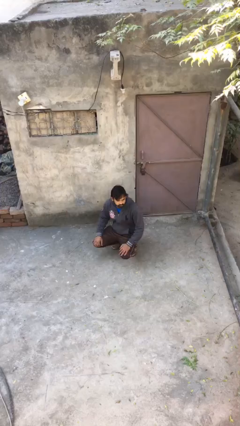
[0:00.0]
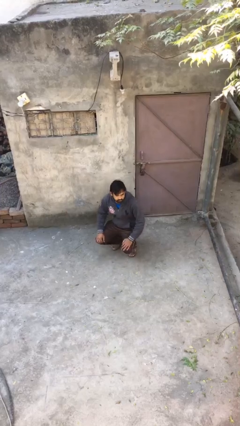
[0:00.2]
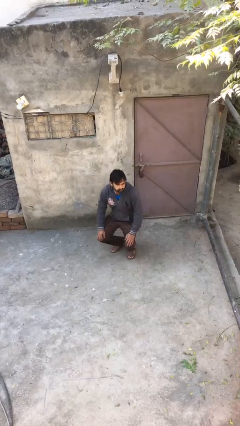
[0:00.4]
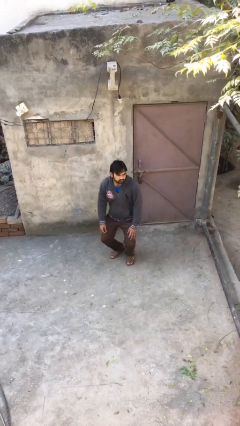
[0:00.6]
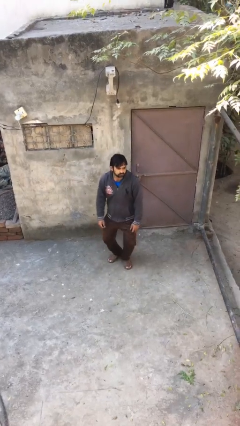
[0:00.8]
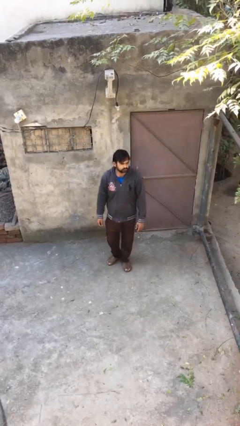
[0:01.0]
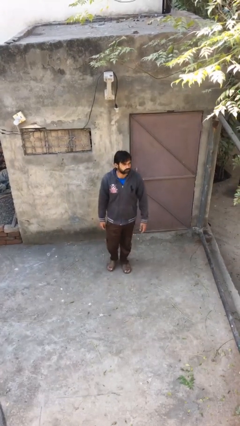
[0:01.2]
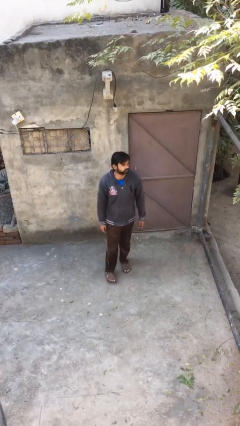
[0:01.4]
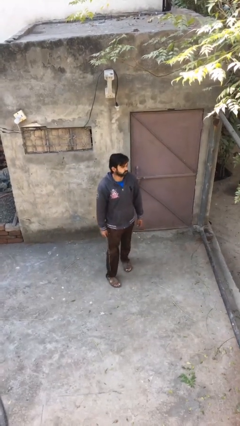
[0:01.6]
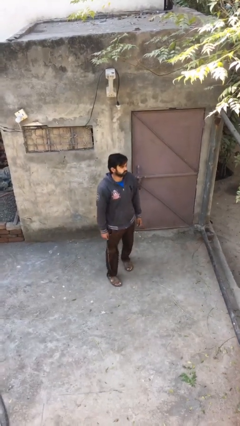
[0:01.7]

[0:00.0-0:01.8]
person stands up

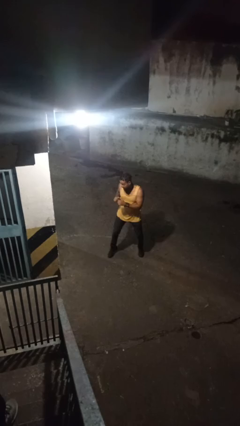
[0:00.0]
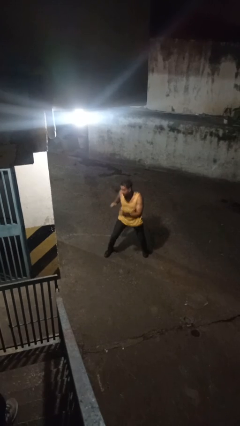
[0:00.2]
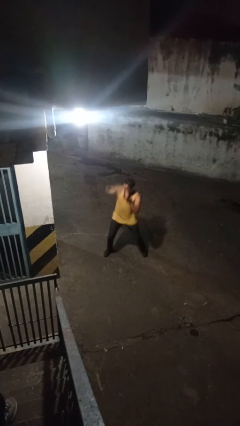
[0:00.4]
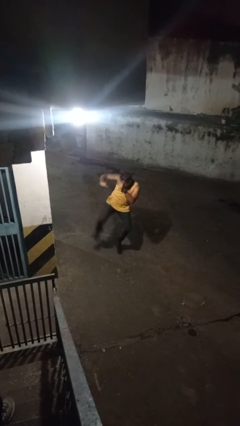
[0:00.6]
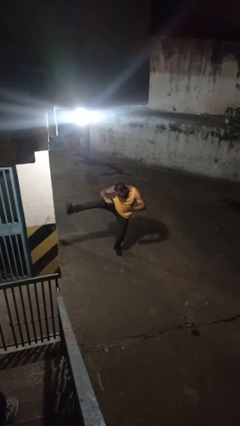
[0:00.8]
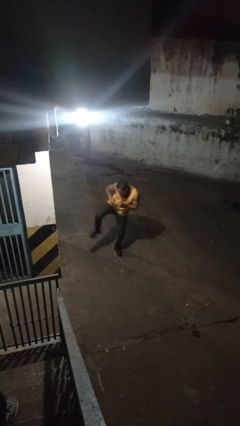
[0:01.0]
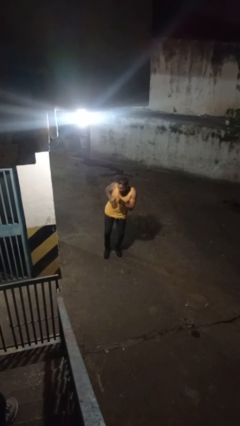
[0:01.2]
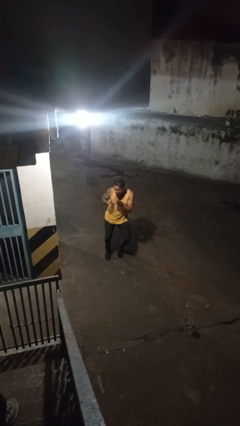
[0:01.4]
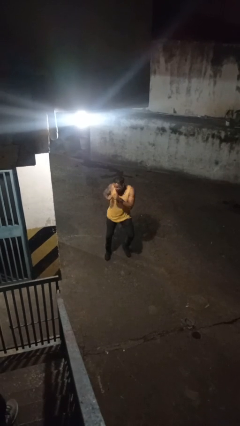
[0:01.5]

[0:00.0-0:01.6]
person karate kicks

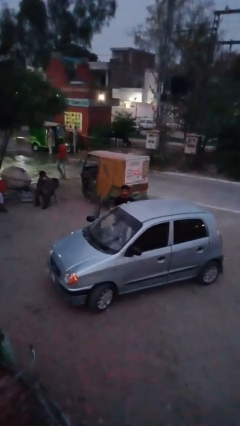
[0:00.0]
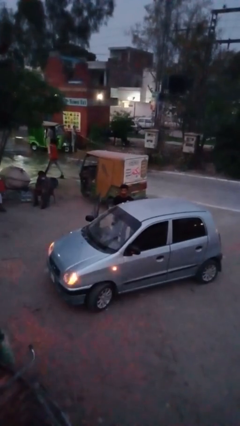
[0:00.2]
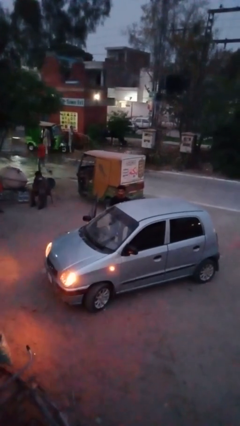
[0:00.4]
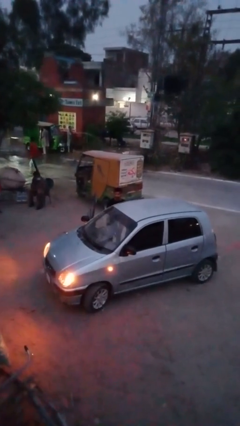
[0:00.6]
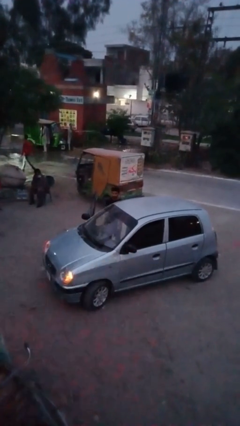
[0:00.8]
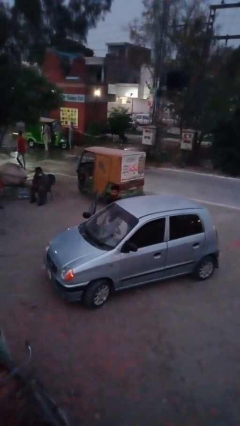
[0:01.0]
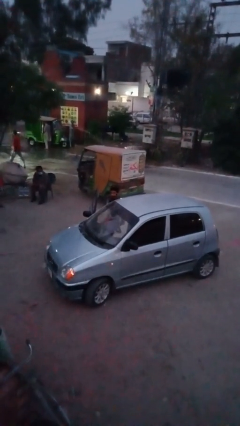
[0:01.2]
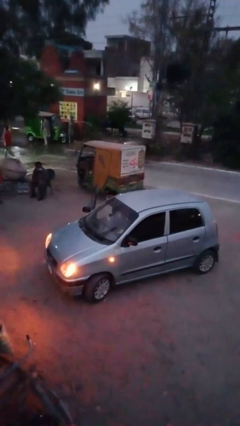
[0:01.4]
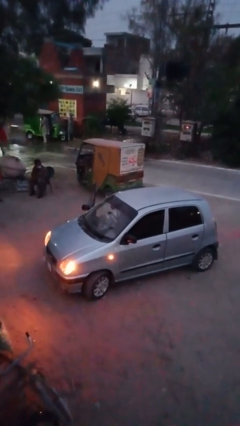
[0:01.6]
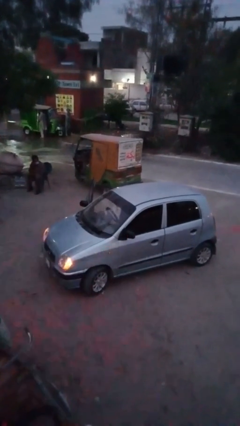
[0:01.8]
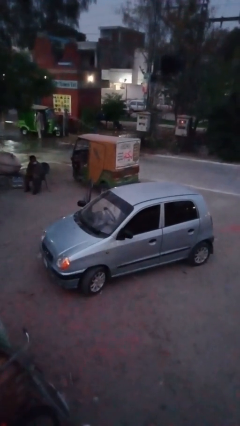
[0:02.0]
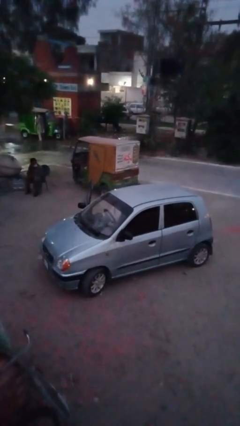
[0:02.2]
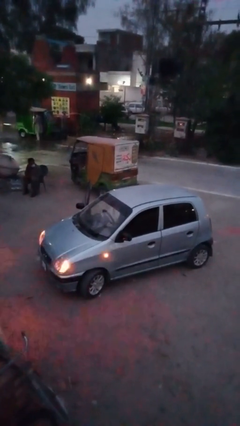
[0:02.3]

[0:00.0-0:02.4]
person enters car

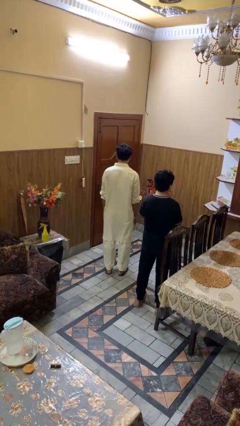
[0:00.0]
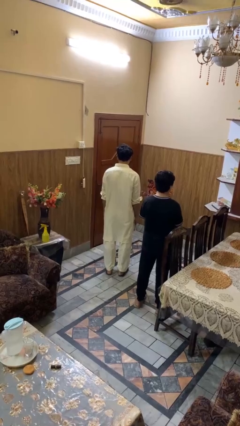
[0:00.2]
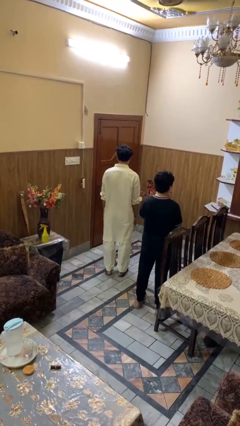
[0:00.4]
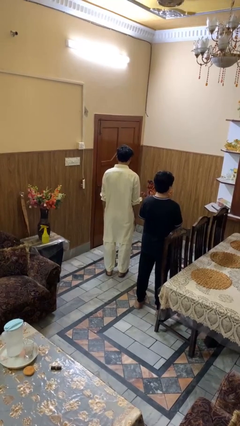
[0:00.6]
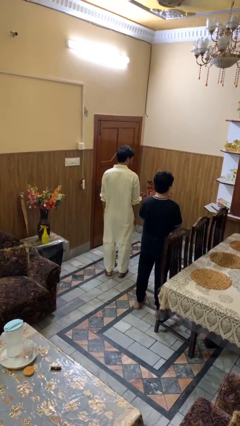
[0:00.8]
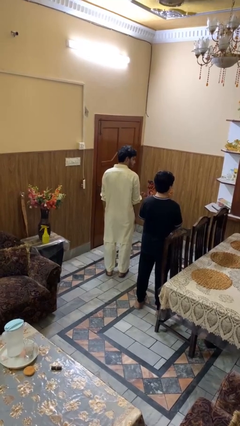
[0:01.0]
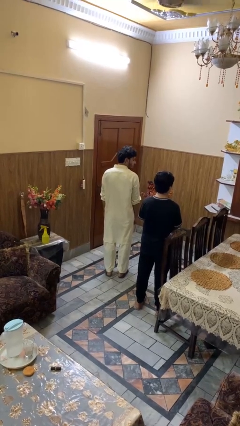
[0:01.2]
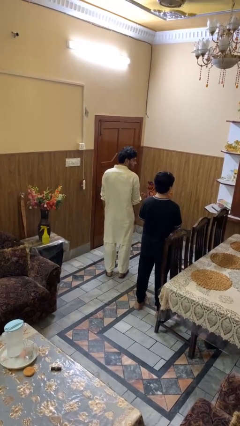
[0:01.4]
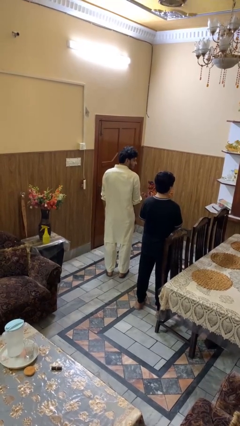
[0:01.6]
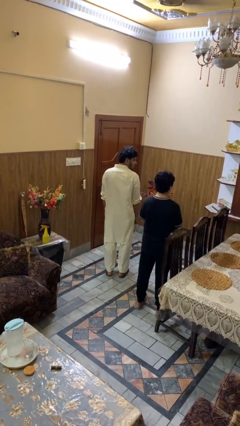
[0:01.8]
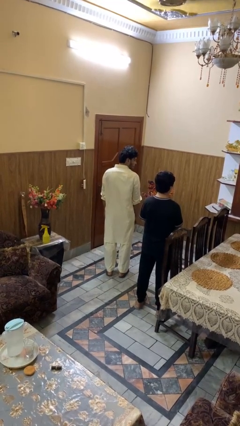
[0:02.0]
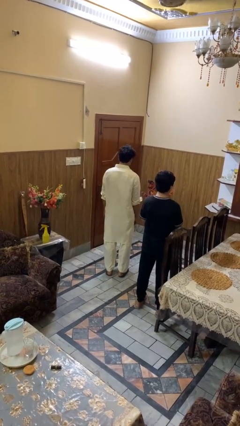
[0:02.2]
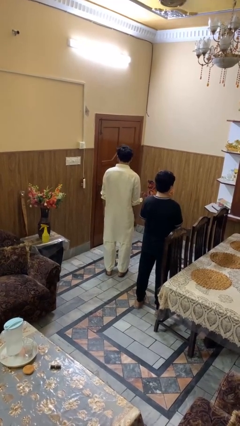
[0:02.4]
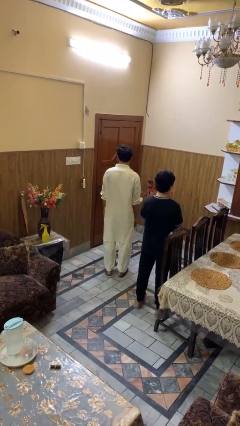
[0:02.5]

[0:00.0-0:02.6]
person looks over shoulder

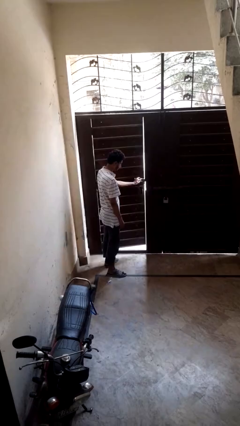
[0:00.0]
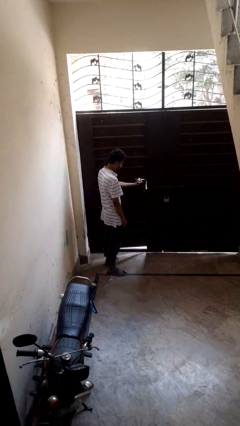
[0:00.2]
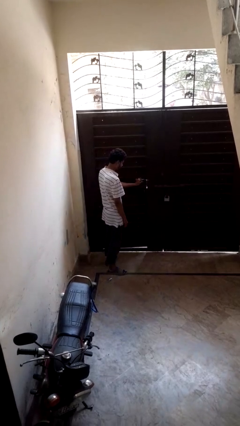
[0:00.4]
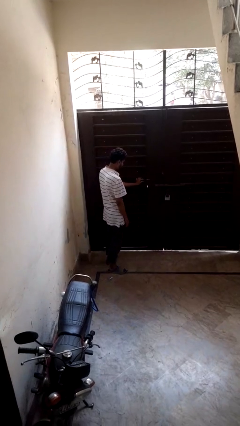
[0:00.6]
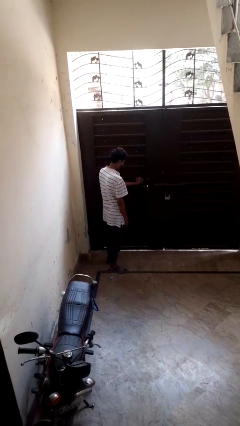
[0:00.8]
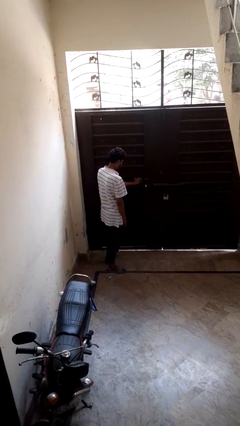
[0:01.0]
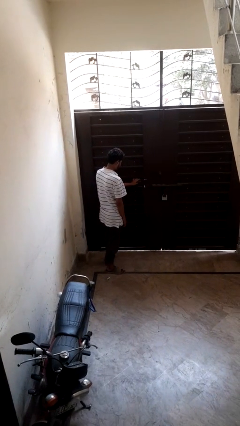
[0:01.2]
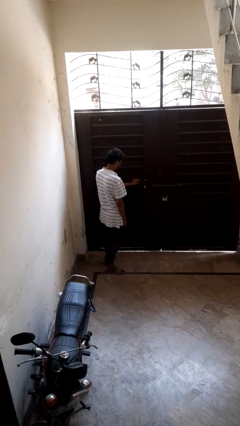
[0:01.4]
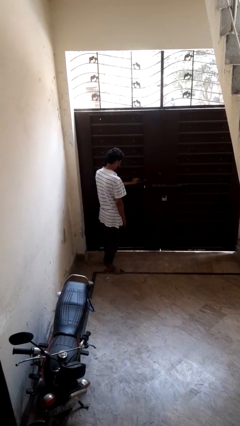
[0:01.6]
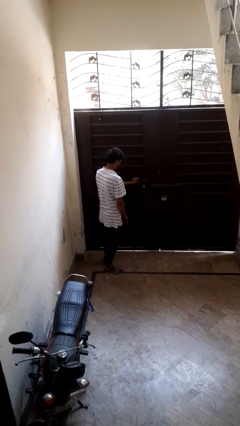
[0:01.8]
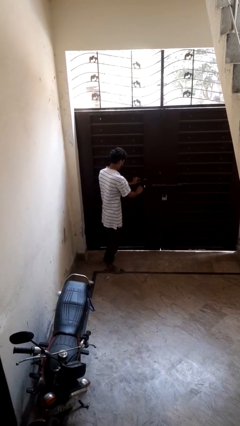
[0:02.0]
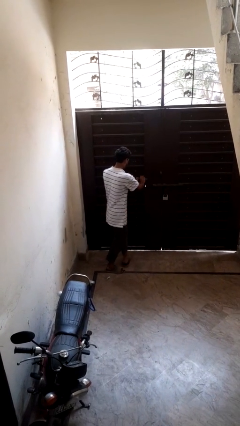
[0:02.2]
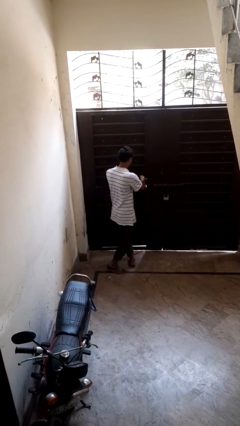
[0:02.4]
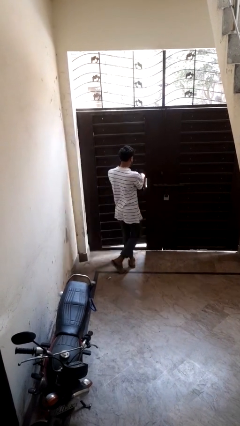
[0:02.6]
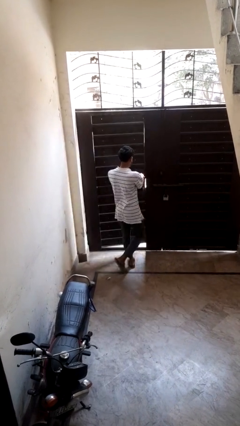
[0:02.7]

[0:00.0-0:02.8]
person closes facility door

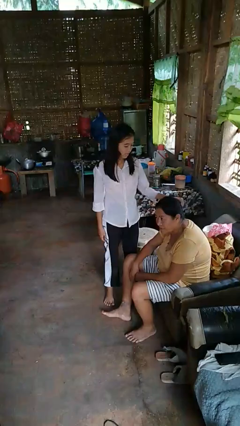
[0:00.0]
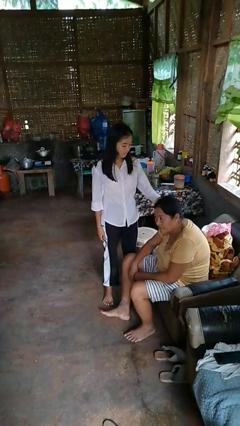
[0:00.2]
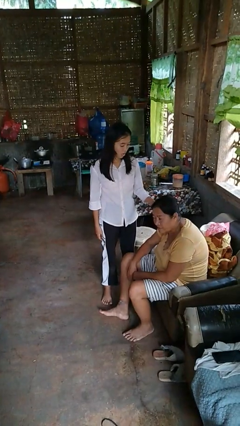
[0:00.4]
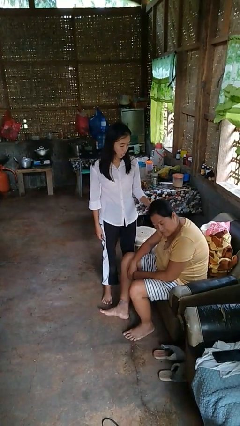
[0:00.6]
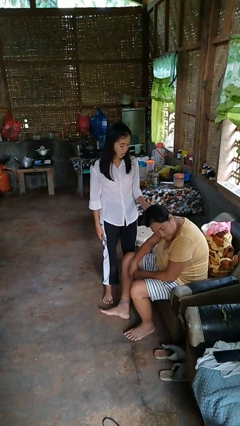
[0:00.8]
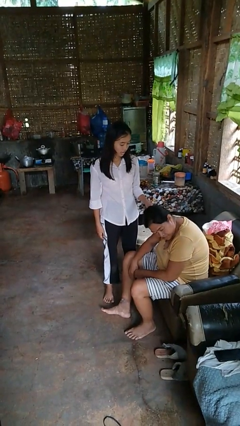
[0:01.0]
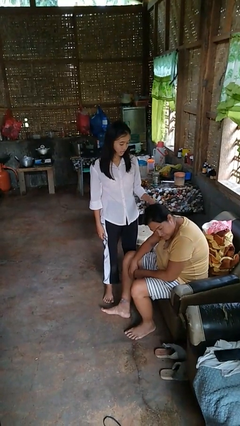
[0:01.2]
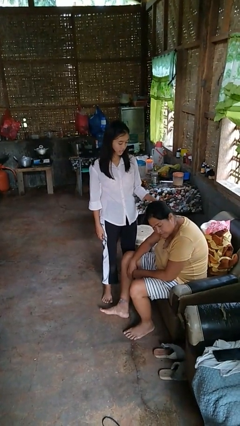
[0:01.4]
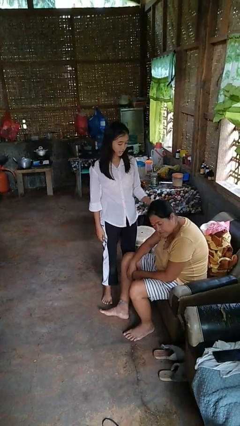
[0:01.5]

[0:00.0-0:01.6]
person grabs person by hair

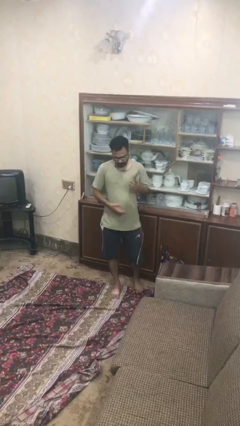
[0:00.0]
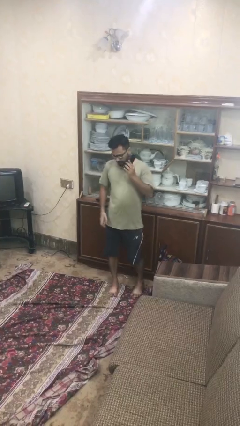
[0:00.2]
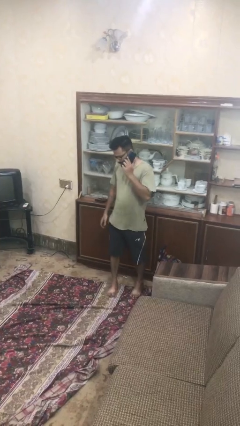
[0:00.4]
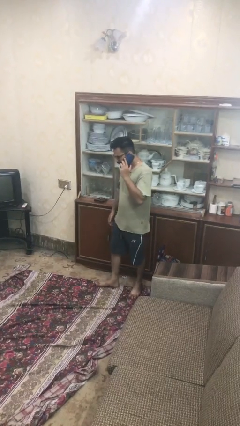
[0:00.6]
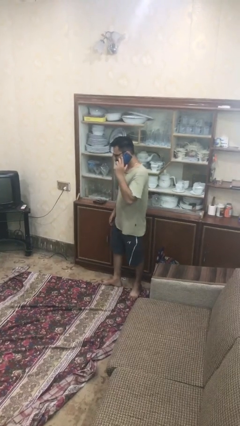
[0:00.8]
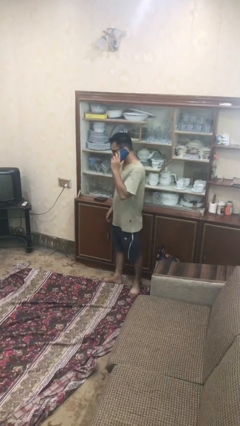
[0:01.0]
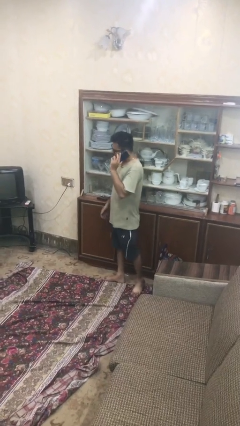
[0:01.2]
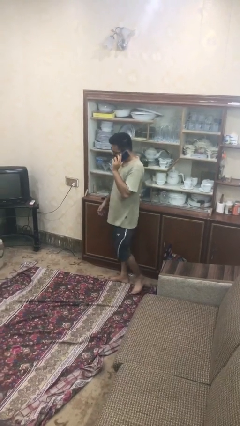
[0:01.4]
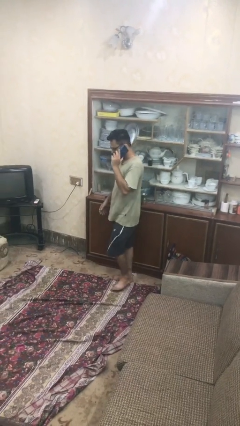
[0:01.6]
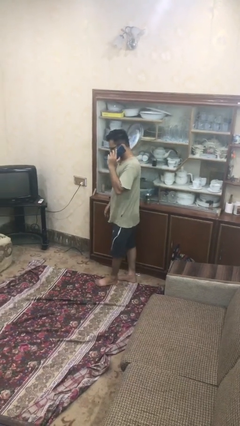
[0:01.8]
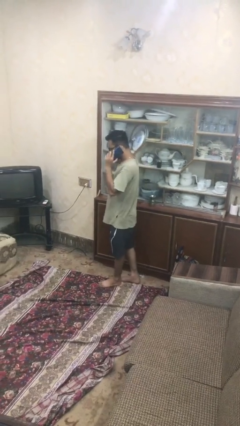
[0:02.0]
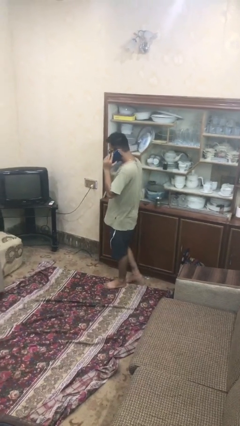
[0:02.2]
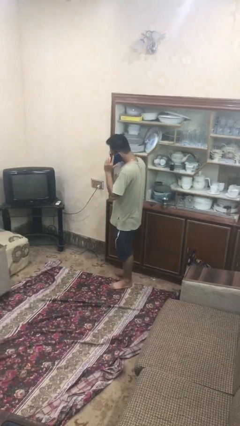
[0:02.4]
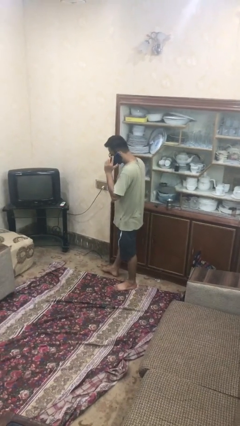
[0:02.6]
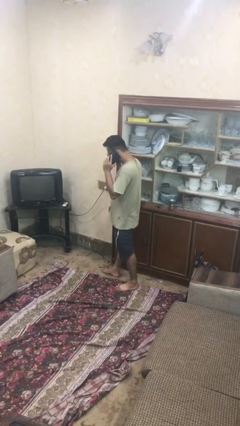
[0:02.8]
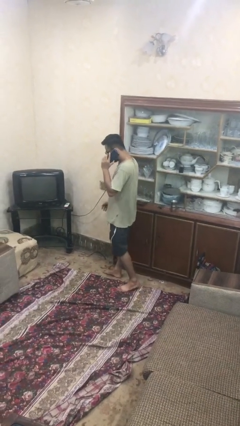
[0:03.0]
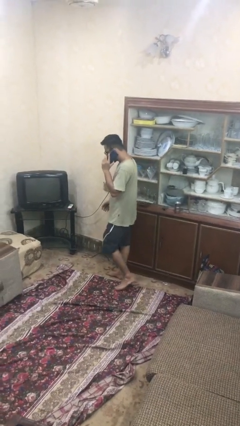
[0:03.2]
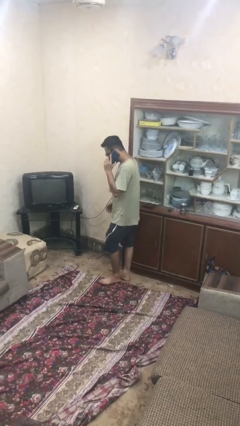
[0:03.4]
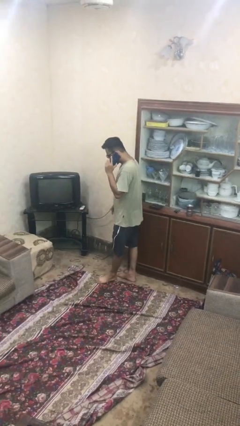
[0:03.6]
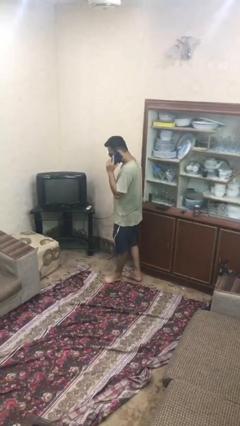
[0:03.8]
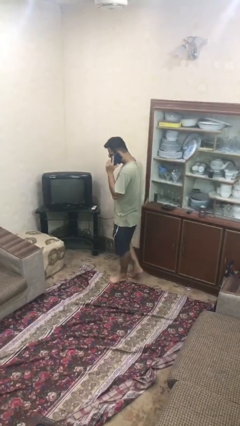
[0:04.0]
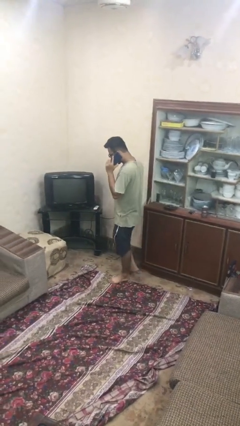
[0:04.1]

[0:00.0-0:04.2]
person talks on phone
